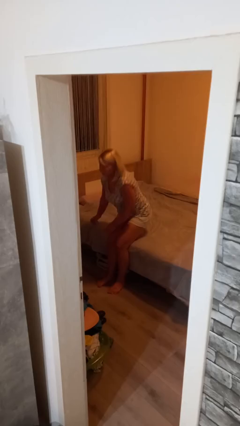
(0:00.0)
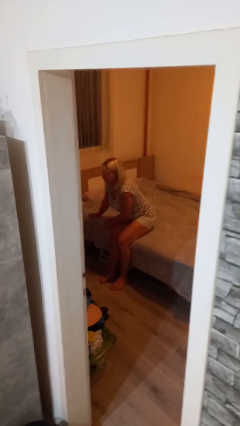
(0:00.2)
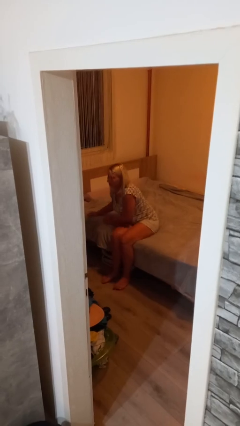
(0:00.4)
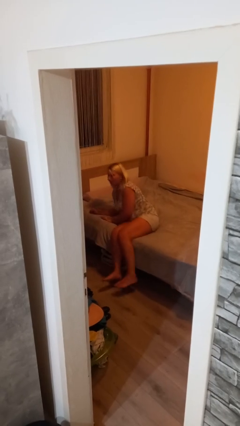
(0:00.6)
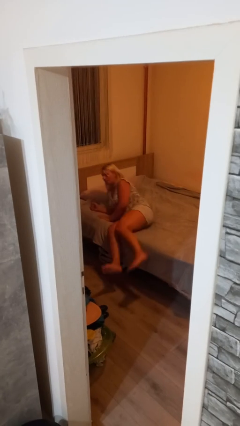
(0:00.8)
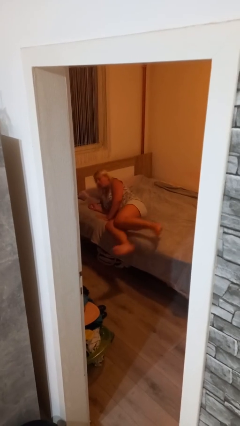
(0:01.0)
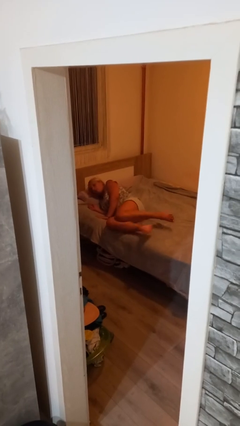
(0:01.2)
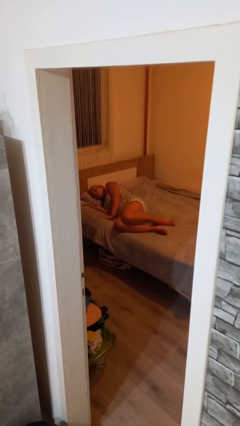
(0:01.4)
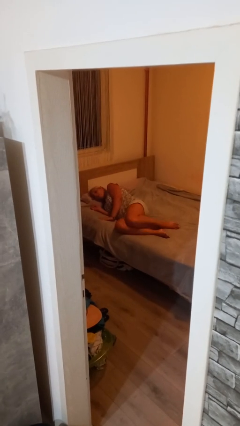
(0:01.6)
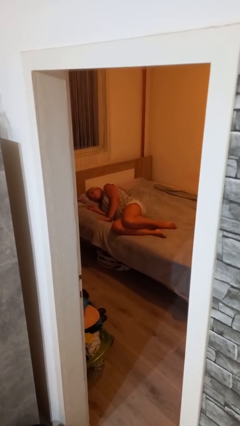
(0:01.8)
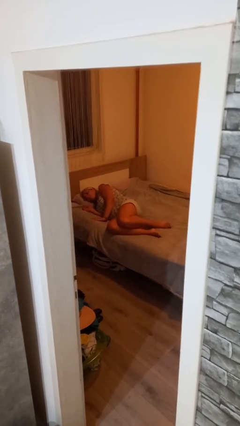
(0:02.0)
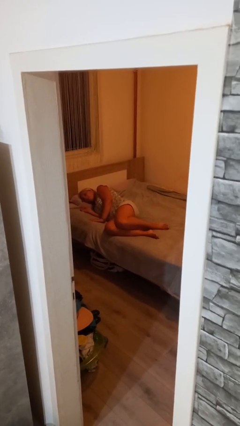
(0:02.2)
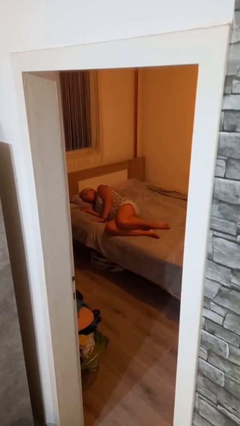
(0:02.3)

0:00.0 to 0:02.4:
person lies down on bed

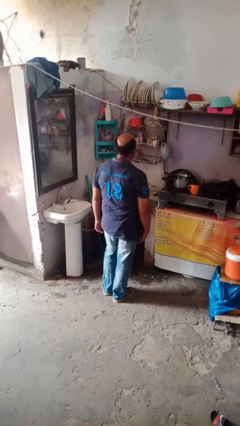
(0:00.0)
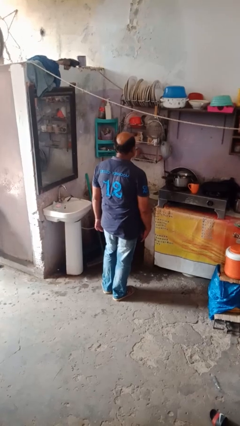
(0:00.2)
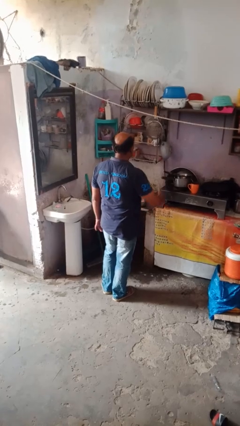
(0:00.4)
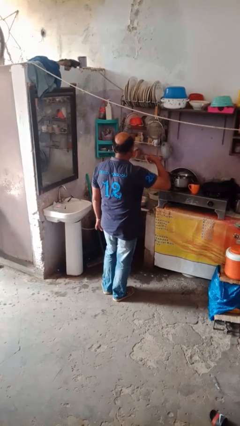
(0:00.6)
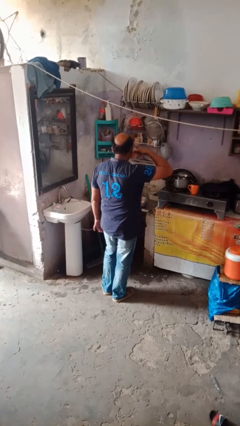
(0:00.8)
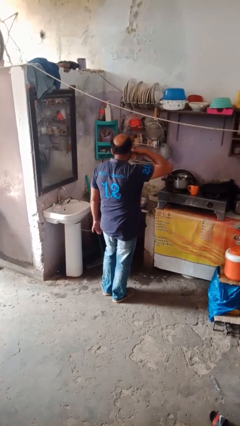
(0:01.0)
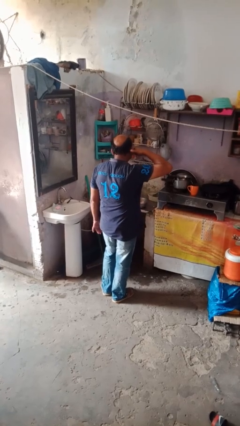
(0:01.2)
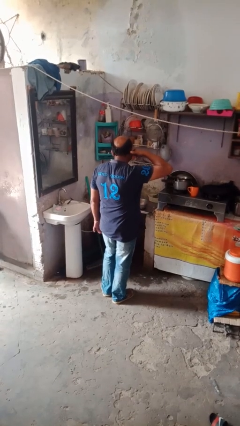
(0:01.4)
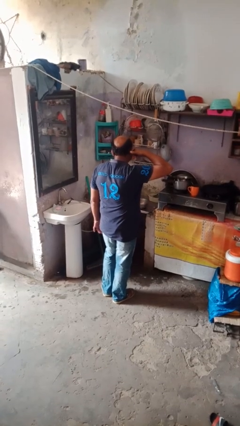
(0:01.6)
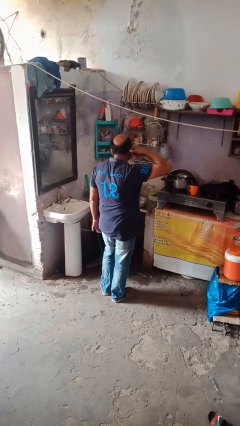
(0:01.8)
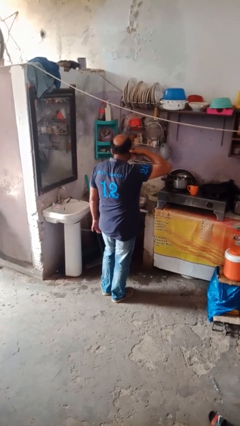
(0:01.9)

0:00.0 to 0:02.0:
person gestures call me

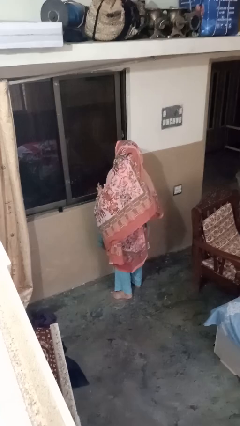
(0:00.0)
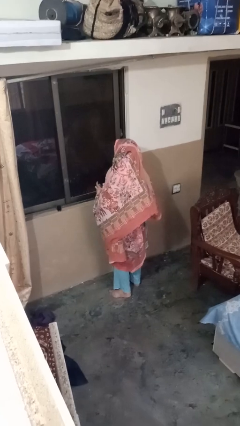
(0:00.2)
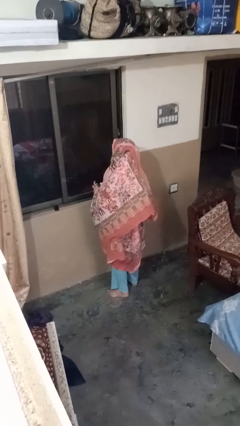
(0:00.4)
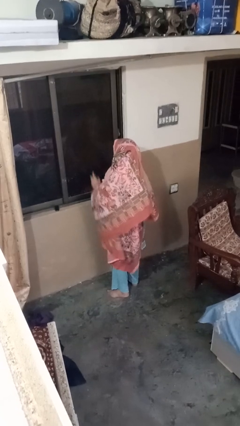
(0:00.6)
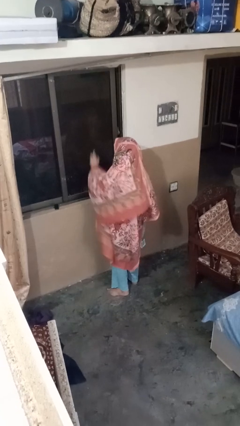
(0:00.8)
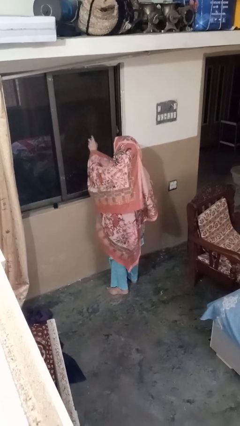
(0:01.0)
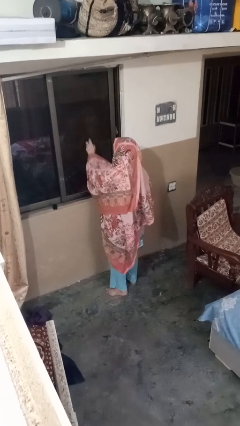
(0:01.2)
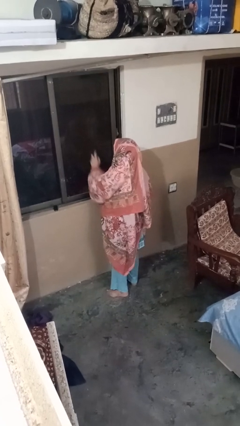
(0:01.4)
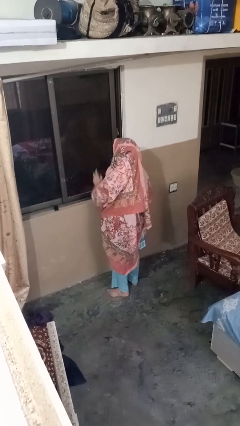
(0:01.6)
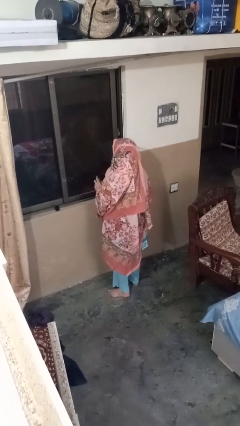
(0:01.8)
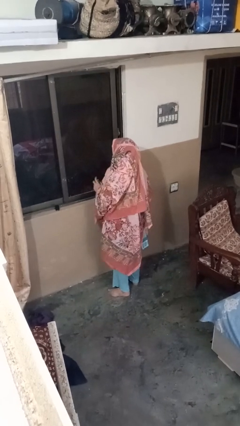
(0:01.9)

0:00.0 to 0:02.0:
person sprays from bottle

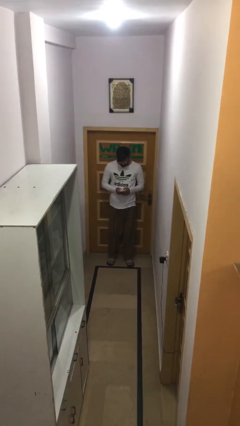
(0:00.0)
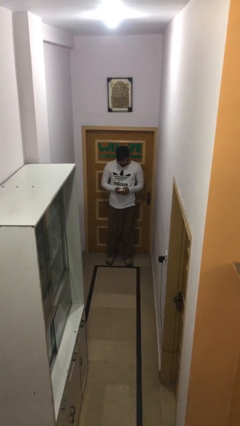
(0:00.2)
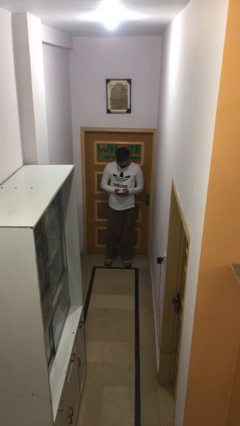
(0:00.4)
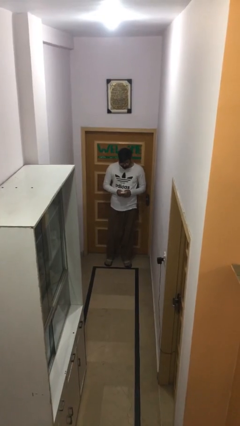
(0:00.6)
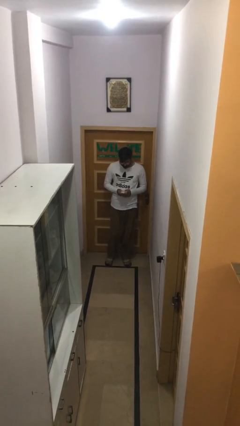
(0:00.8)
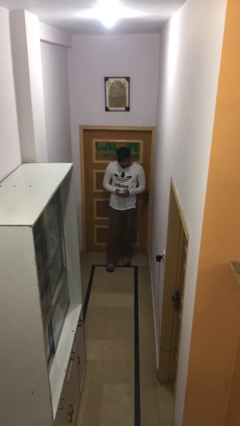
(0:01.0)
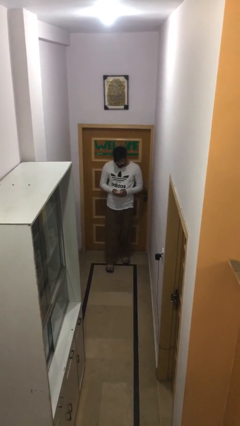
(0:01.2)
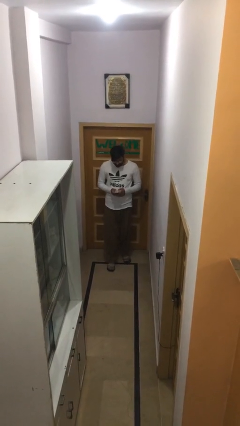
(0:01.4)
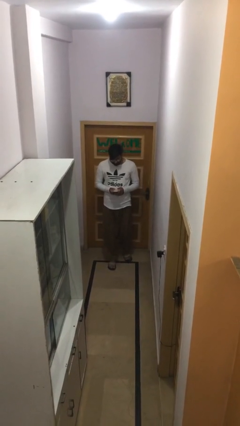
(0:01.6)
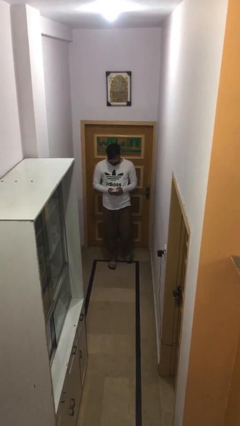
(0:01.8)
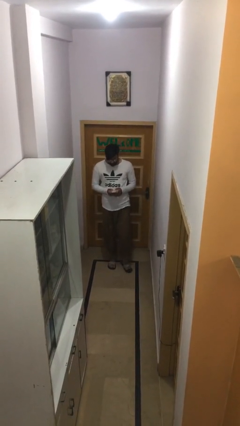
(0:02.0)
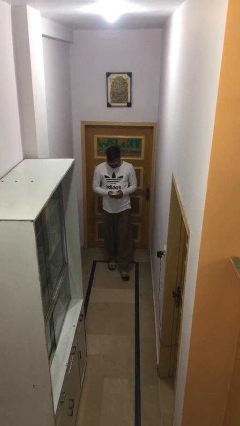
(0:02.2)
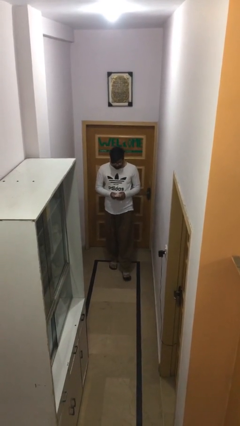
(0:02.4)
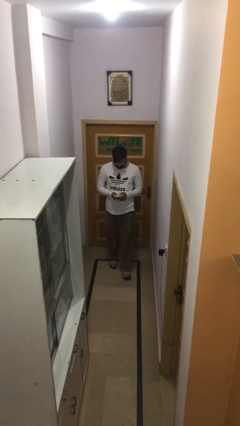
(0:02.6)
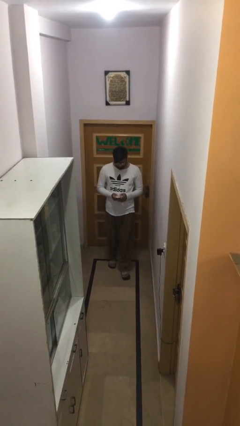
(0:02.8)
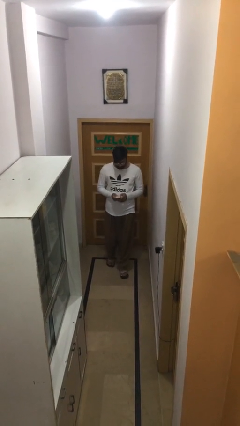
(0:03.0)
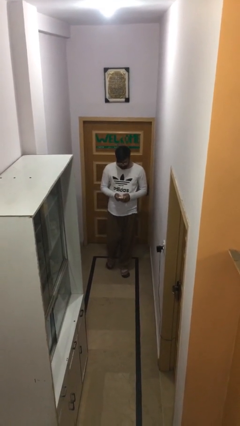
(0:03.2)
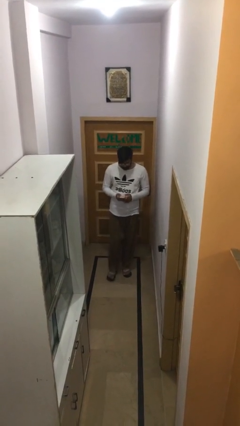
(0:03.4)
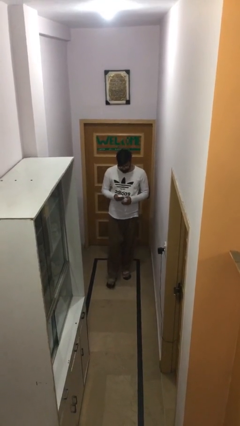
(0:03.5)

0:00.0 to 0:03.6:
person texts on phone

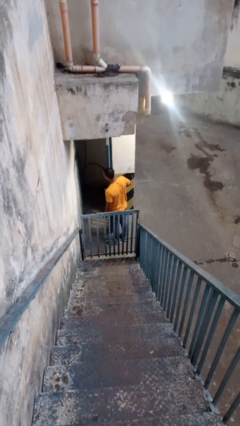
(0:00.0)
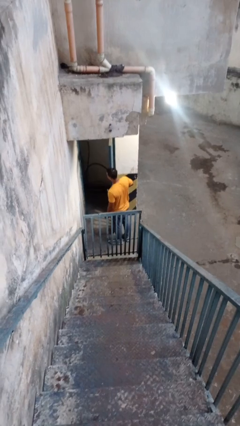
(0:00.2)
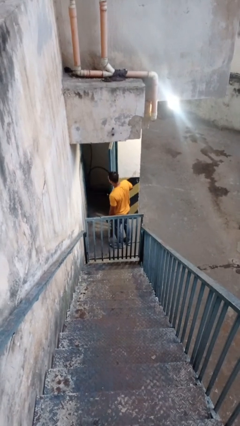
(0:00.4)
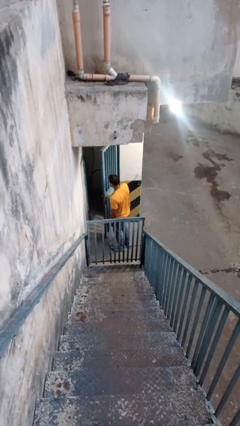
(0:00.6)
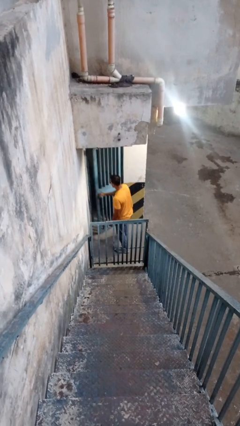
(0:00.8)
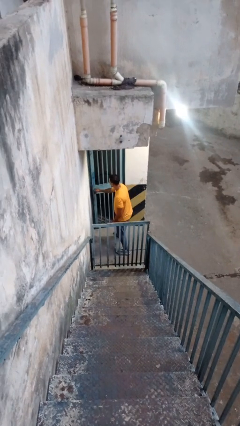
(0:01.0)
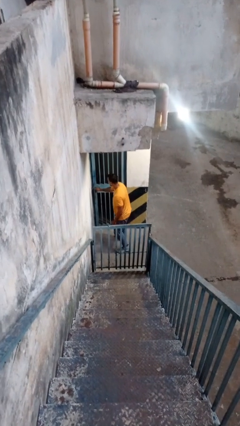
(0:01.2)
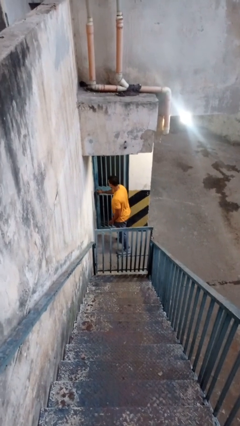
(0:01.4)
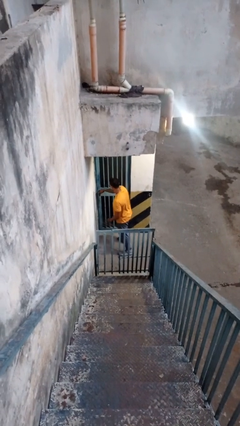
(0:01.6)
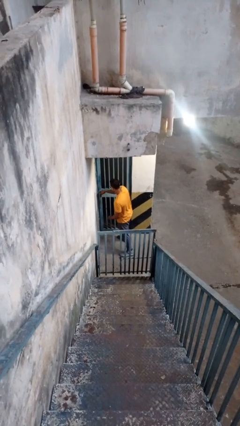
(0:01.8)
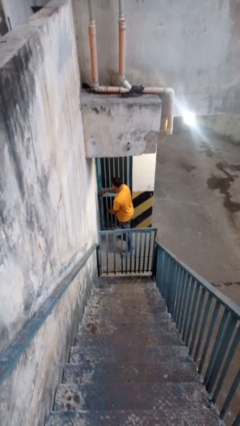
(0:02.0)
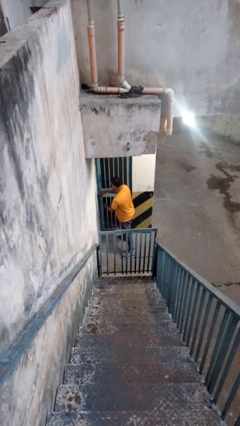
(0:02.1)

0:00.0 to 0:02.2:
person closes facility door

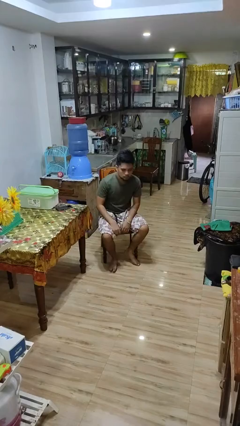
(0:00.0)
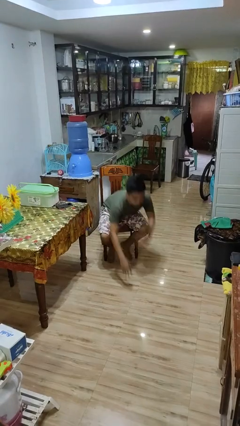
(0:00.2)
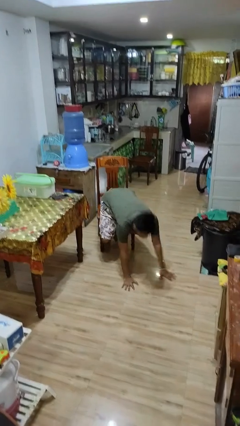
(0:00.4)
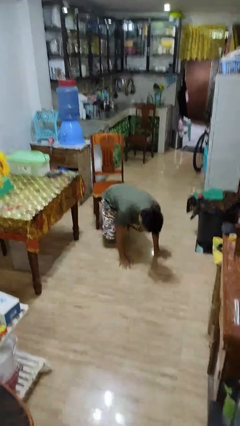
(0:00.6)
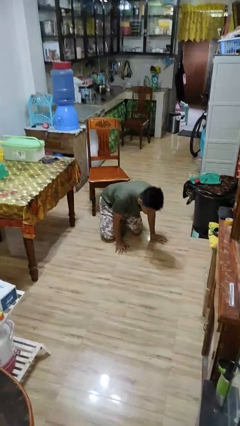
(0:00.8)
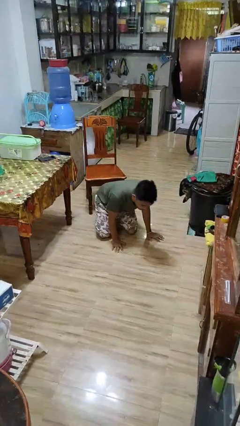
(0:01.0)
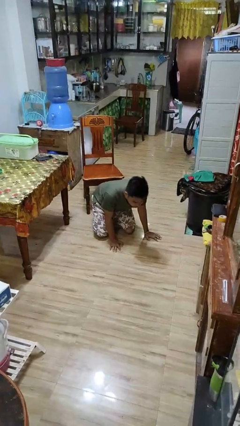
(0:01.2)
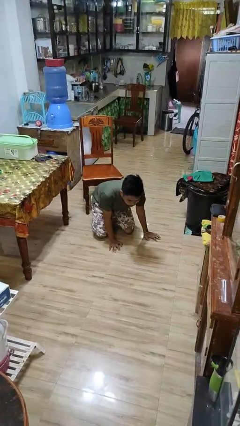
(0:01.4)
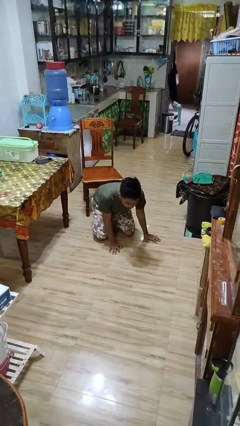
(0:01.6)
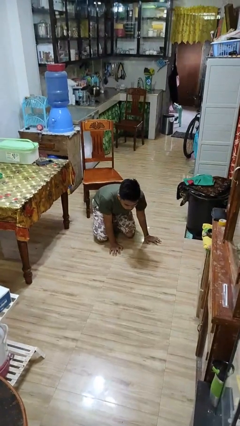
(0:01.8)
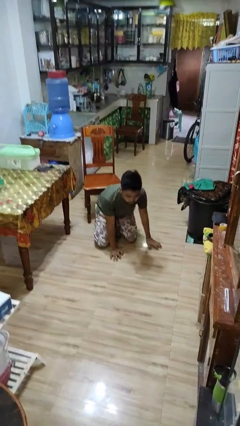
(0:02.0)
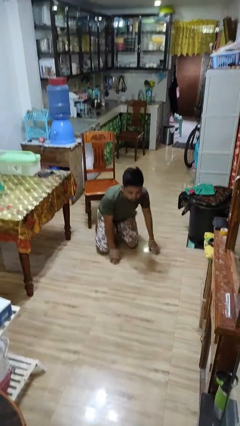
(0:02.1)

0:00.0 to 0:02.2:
person falls from chair

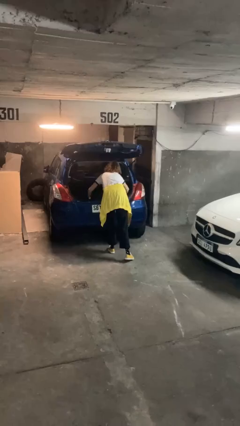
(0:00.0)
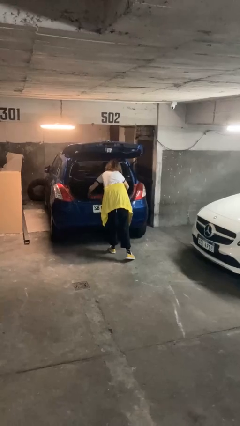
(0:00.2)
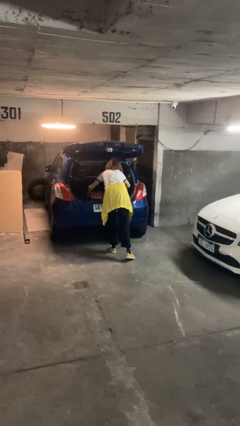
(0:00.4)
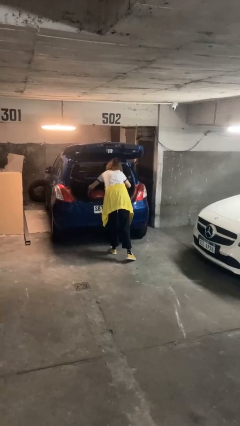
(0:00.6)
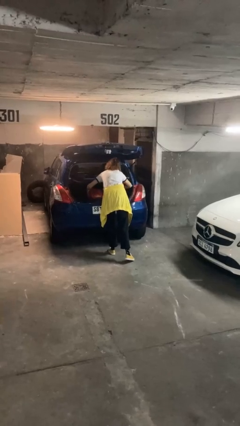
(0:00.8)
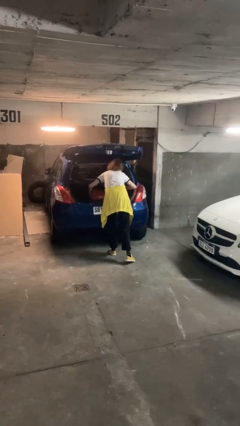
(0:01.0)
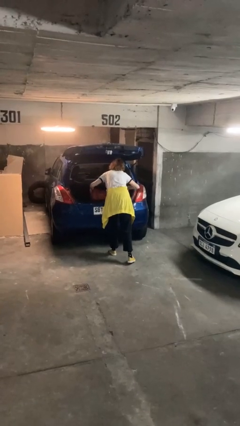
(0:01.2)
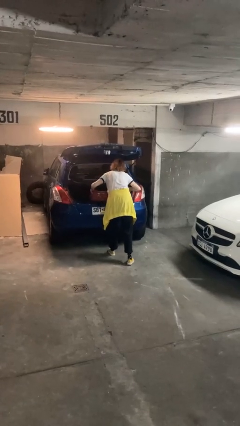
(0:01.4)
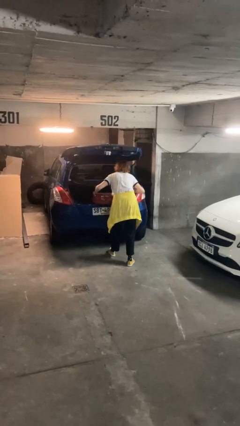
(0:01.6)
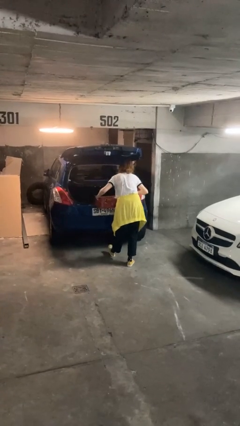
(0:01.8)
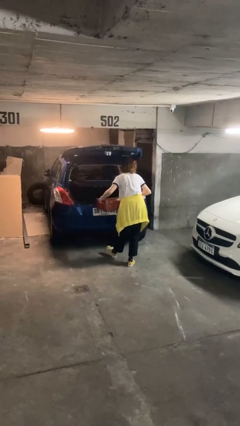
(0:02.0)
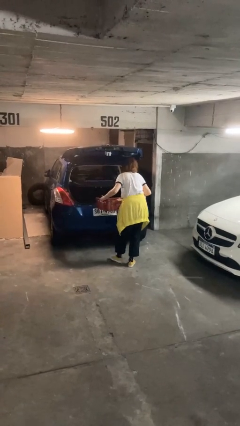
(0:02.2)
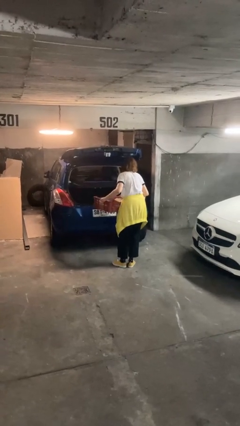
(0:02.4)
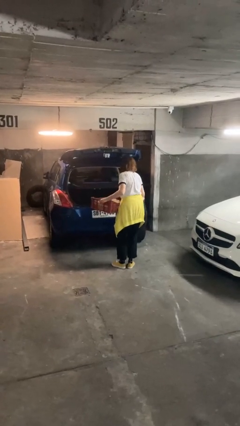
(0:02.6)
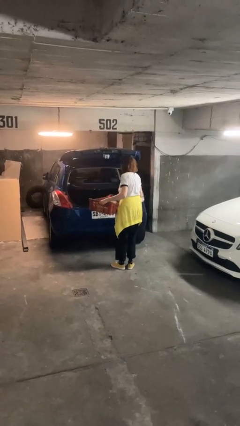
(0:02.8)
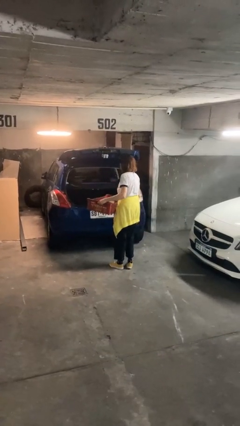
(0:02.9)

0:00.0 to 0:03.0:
person unloads car
